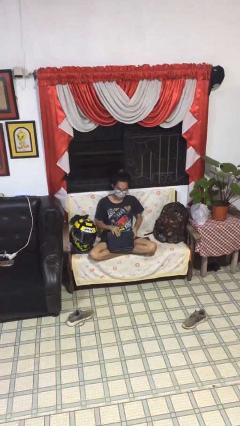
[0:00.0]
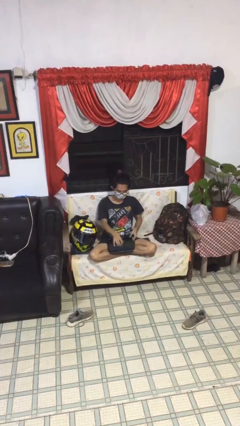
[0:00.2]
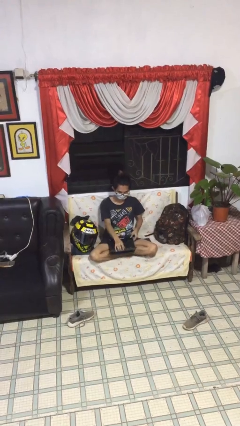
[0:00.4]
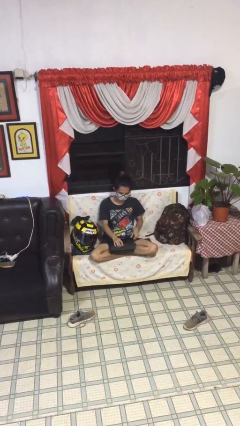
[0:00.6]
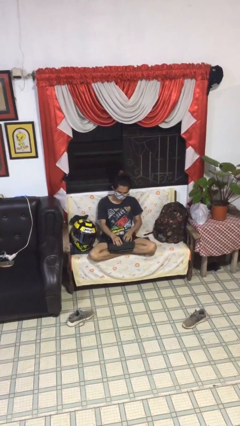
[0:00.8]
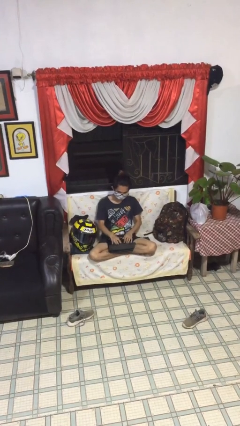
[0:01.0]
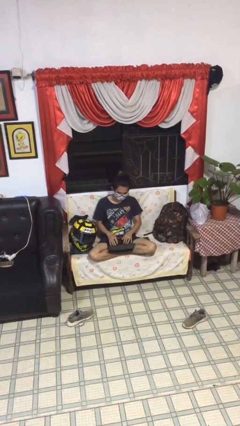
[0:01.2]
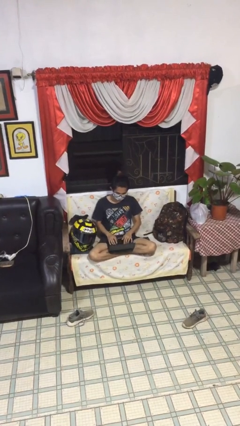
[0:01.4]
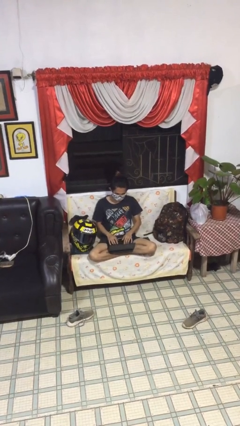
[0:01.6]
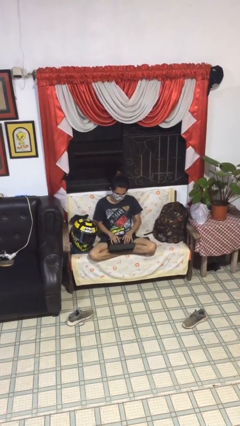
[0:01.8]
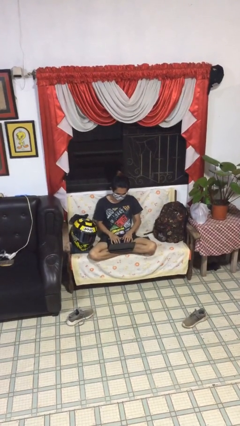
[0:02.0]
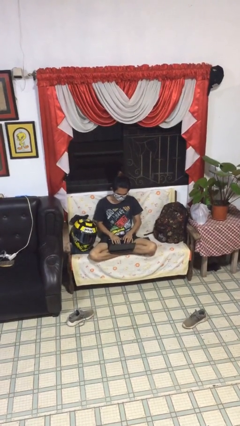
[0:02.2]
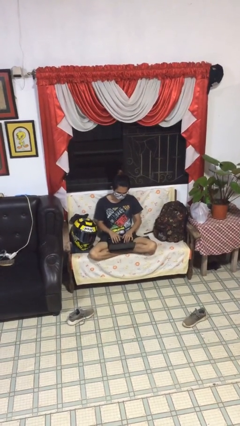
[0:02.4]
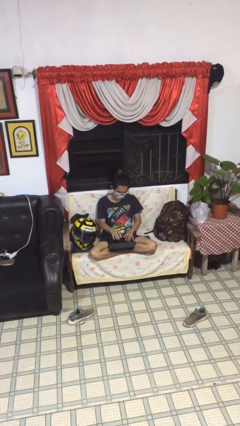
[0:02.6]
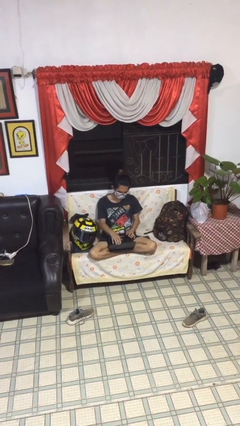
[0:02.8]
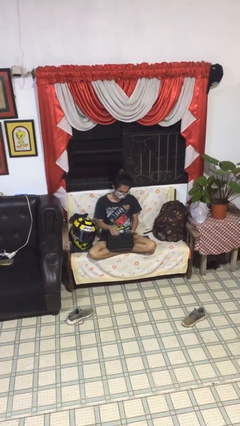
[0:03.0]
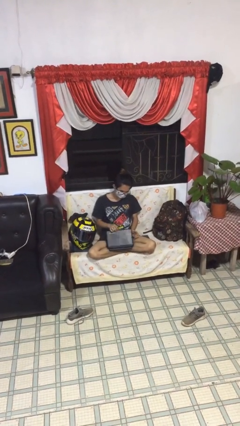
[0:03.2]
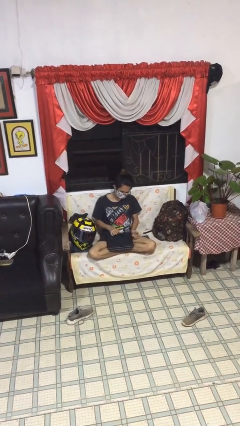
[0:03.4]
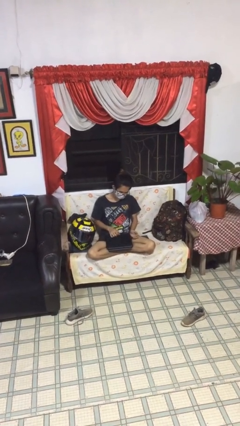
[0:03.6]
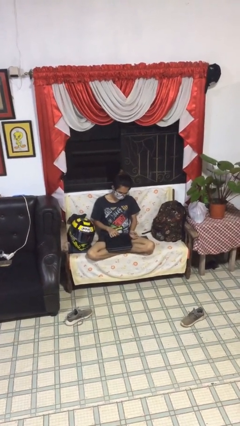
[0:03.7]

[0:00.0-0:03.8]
person interacts with laptop

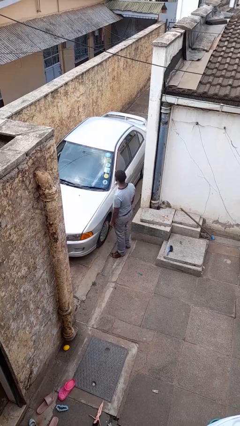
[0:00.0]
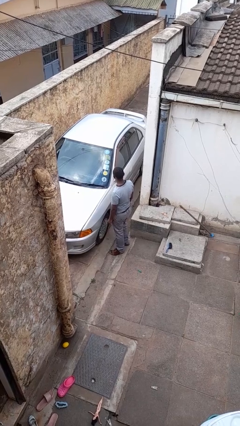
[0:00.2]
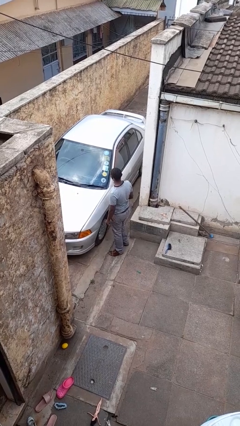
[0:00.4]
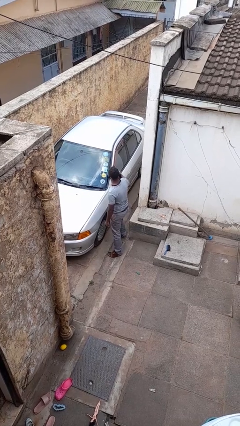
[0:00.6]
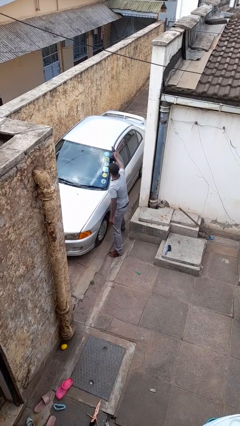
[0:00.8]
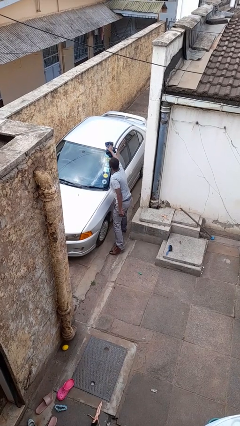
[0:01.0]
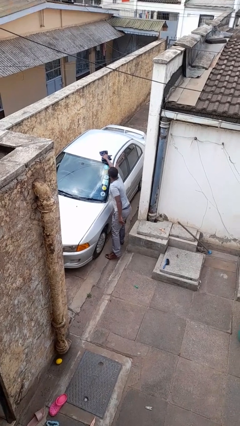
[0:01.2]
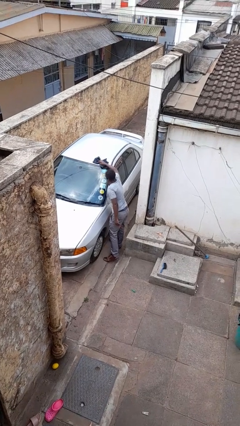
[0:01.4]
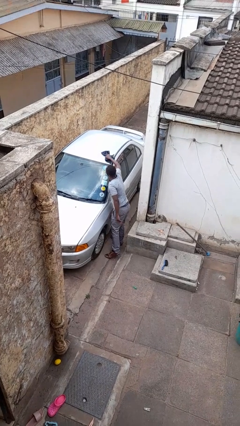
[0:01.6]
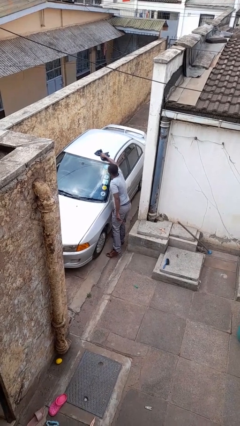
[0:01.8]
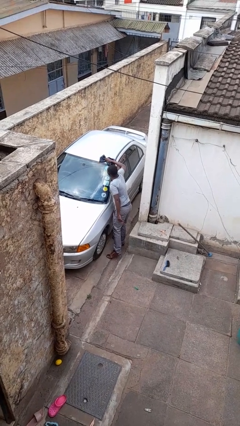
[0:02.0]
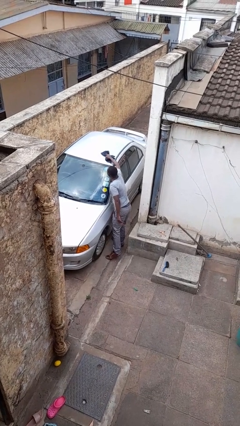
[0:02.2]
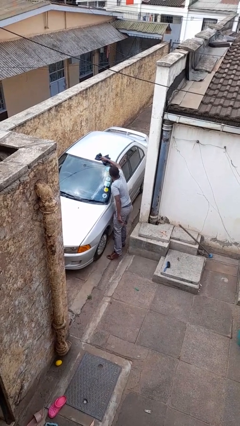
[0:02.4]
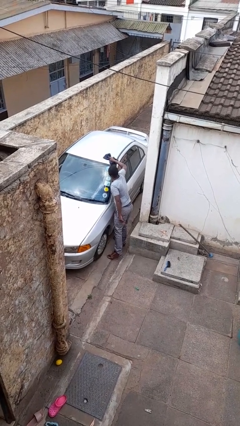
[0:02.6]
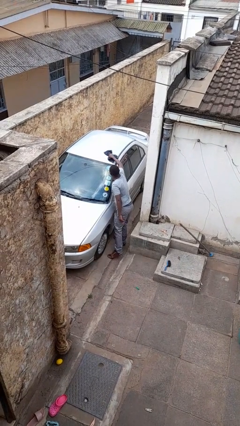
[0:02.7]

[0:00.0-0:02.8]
person polishes car with rag

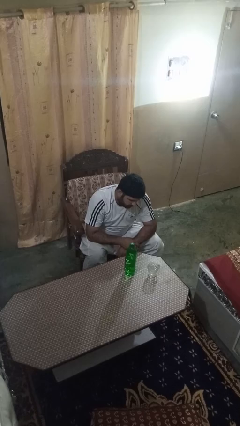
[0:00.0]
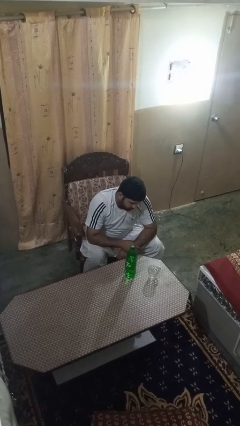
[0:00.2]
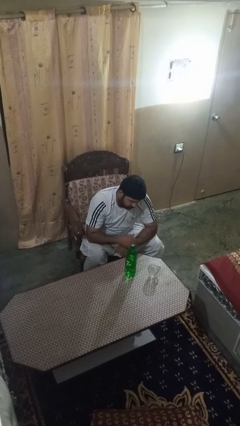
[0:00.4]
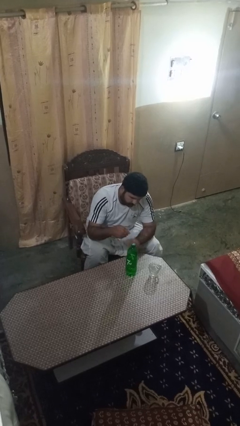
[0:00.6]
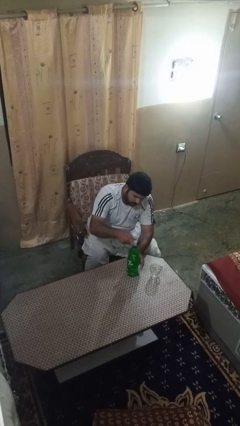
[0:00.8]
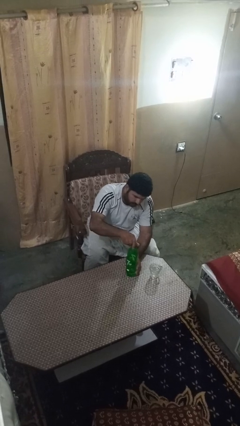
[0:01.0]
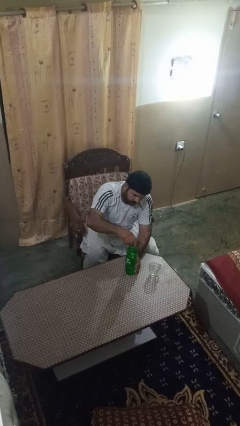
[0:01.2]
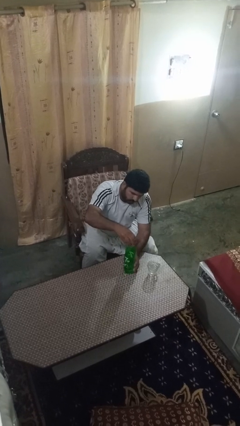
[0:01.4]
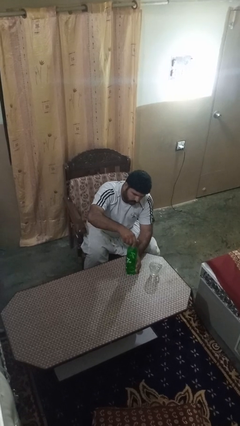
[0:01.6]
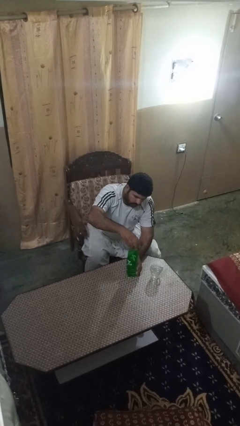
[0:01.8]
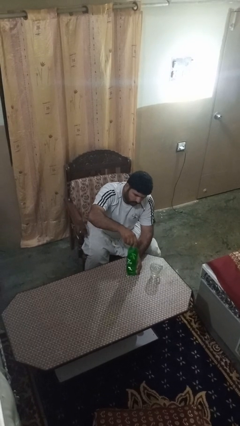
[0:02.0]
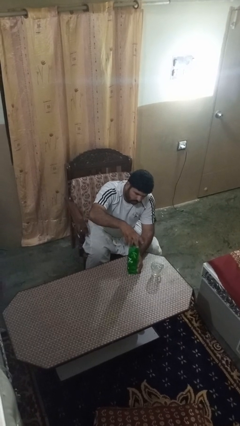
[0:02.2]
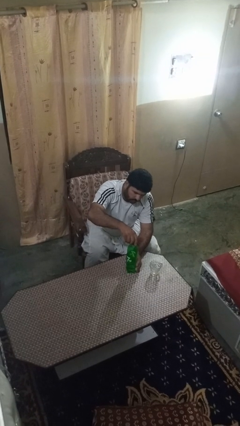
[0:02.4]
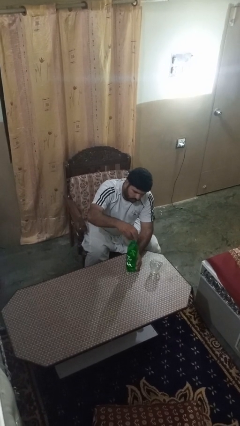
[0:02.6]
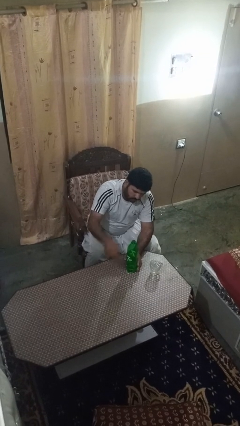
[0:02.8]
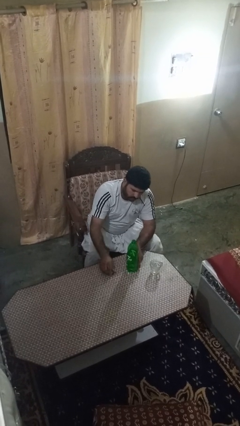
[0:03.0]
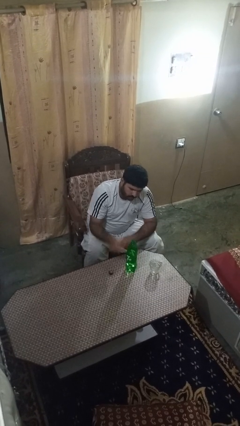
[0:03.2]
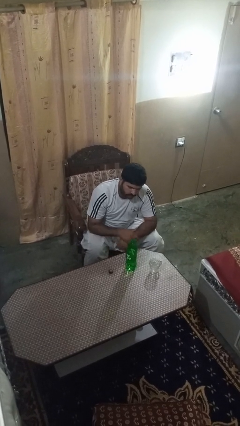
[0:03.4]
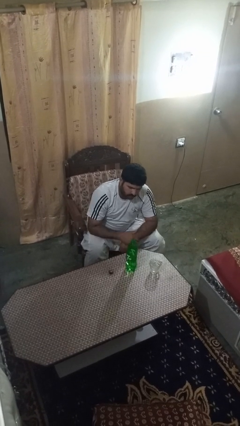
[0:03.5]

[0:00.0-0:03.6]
person unscrews lid from bottle

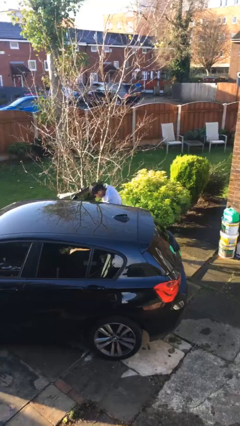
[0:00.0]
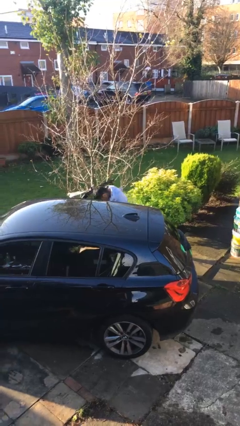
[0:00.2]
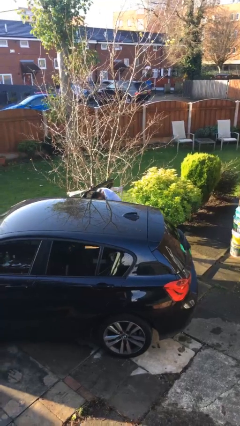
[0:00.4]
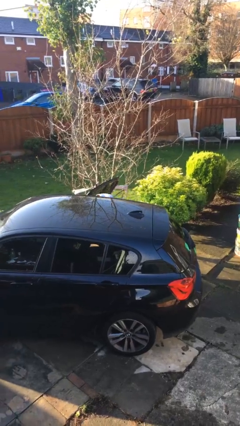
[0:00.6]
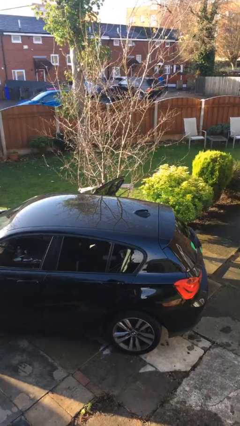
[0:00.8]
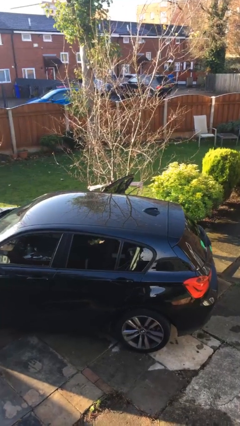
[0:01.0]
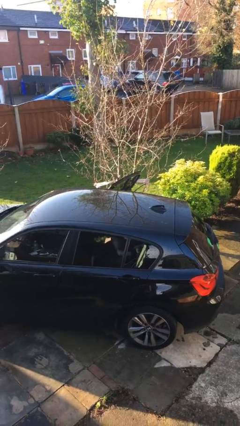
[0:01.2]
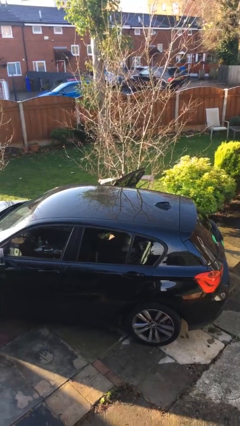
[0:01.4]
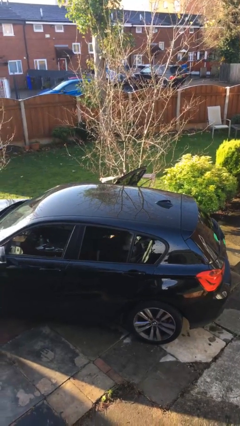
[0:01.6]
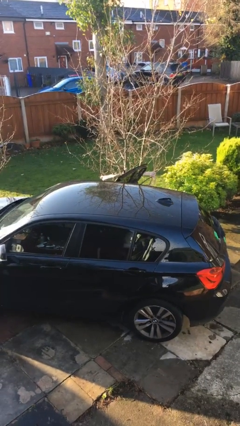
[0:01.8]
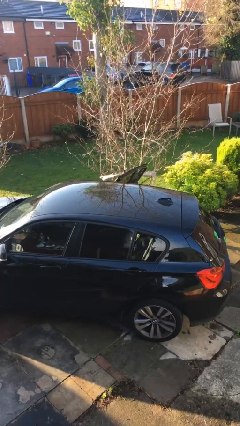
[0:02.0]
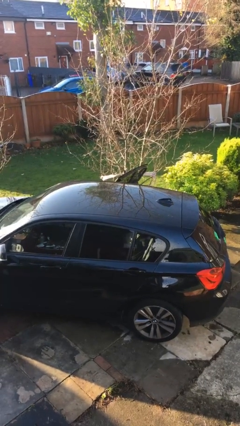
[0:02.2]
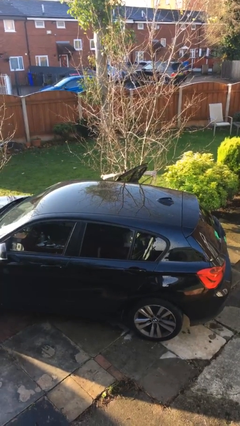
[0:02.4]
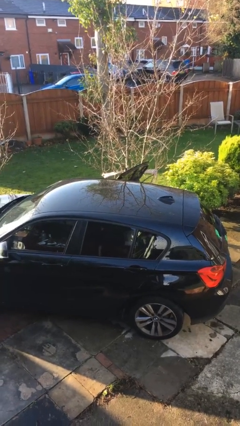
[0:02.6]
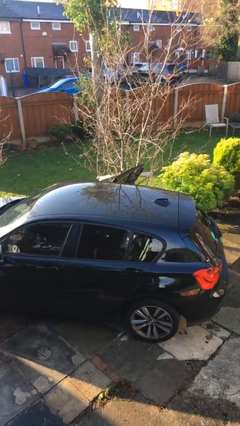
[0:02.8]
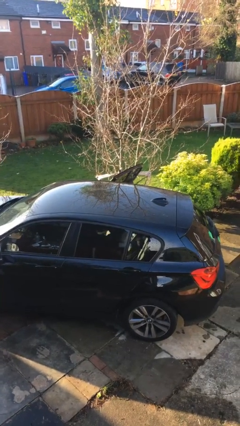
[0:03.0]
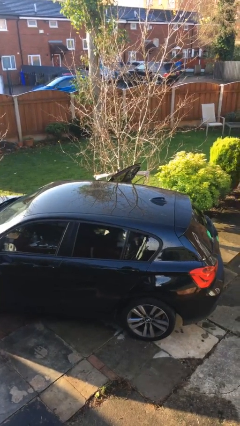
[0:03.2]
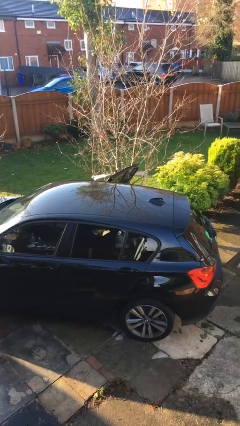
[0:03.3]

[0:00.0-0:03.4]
person enters car

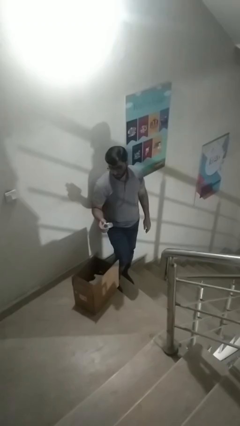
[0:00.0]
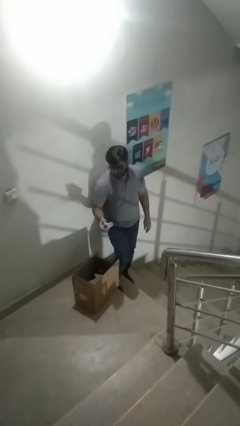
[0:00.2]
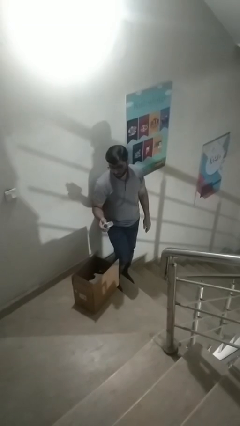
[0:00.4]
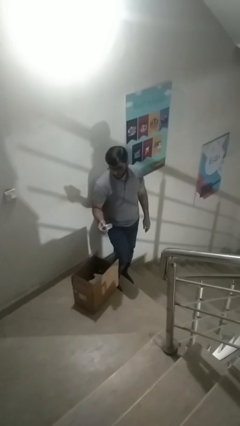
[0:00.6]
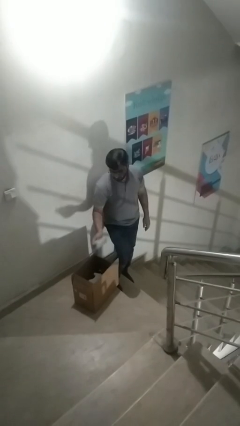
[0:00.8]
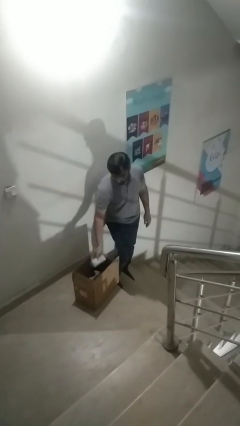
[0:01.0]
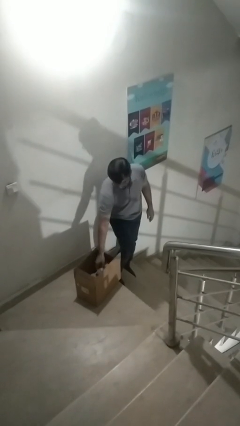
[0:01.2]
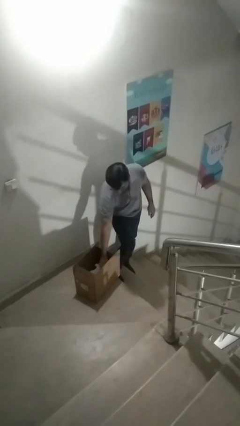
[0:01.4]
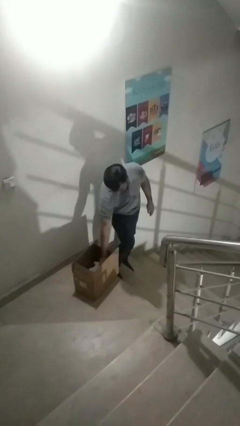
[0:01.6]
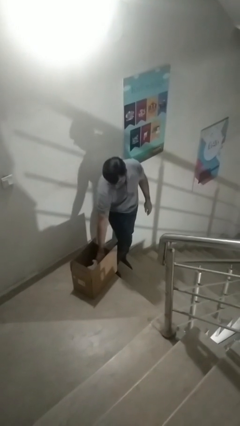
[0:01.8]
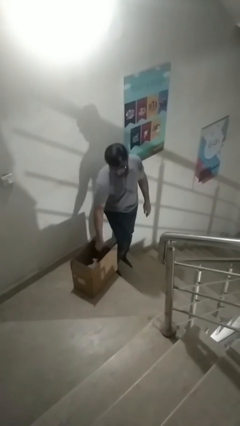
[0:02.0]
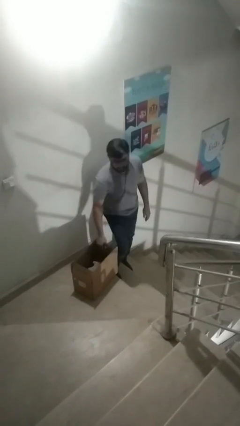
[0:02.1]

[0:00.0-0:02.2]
person puts object into box

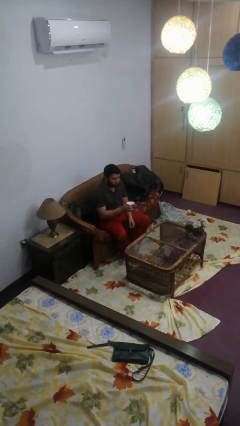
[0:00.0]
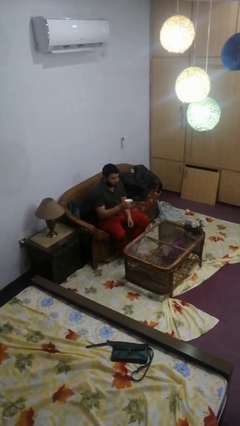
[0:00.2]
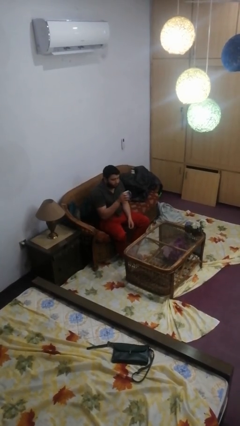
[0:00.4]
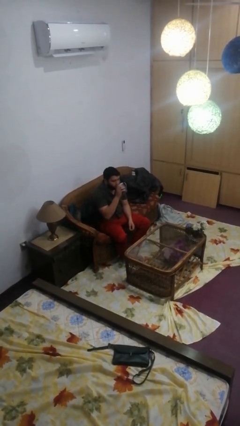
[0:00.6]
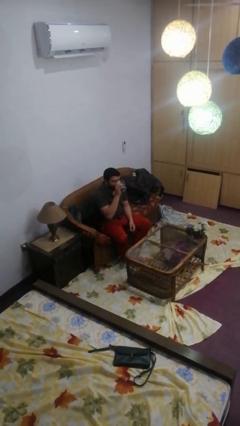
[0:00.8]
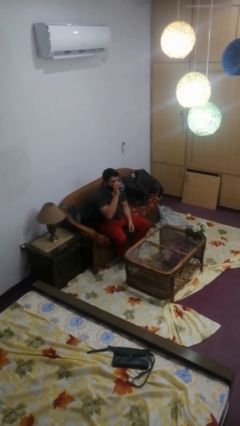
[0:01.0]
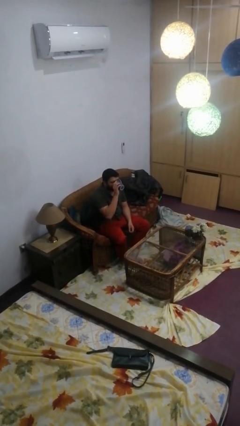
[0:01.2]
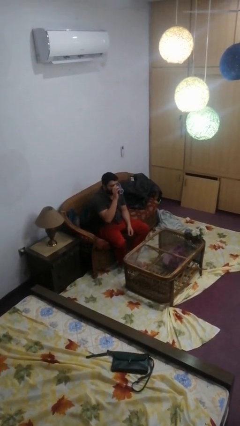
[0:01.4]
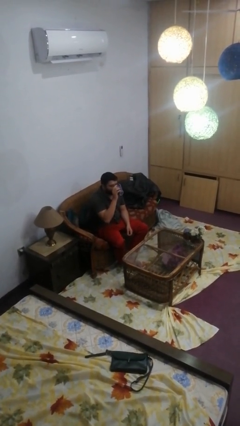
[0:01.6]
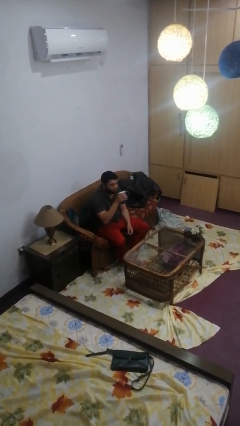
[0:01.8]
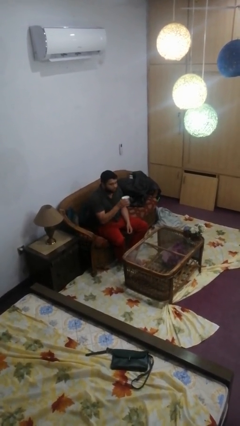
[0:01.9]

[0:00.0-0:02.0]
person drinks from mug
